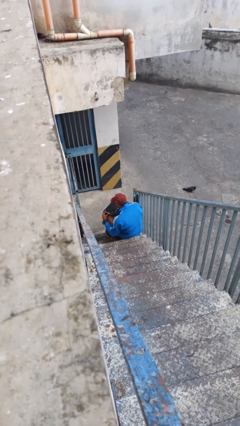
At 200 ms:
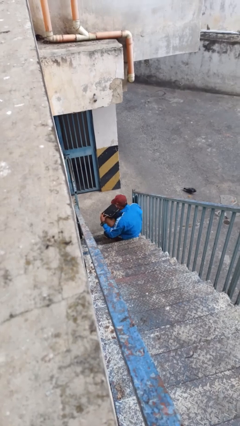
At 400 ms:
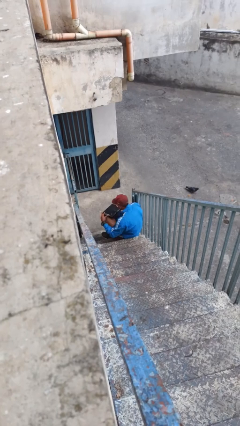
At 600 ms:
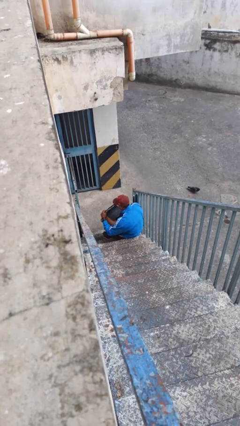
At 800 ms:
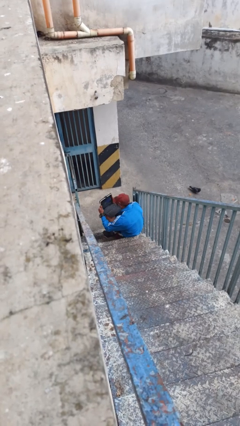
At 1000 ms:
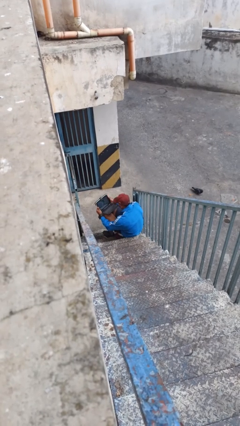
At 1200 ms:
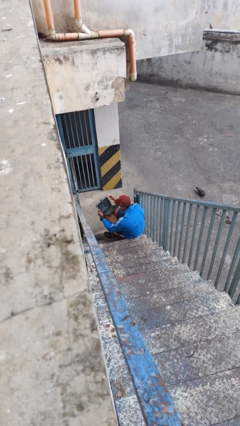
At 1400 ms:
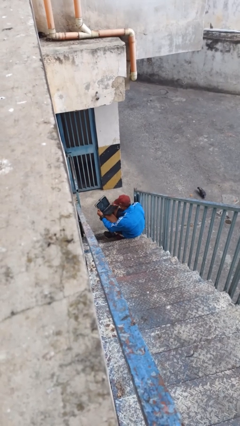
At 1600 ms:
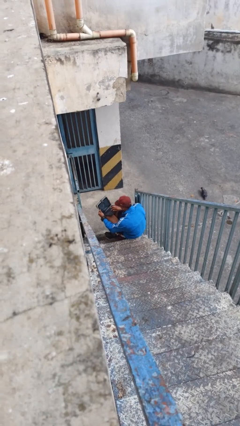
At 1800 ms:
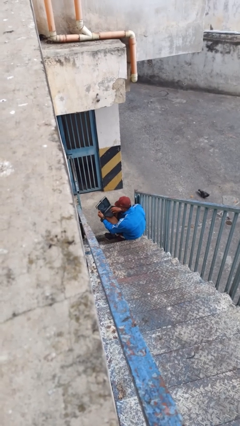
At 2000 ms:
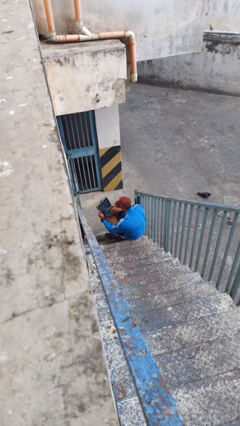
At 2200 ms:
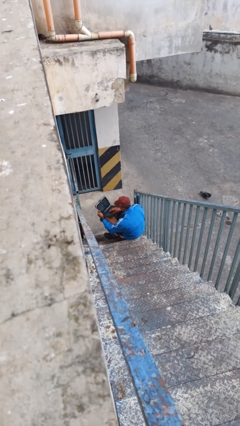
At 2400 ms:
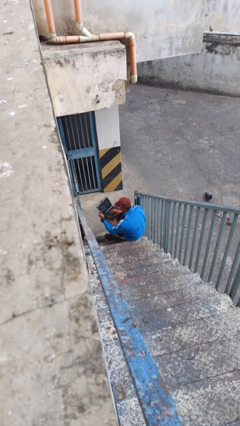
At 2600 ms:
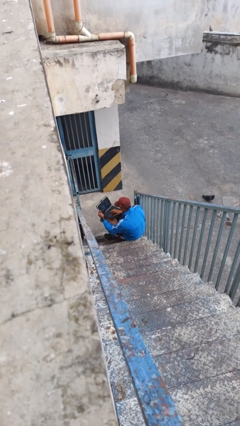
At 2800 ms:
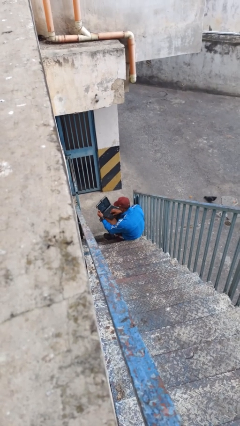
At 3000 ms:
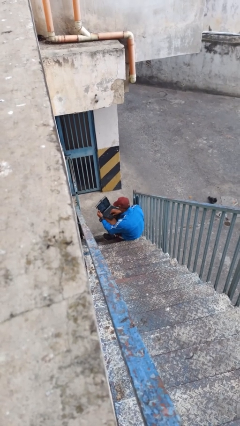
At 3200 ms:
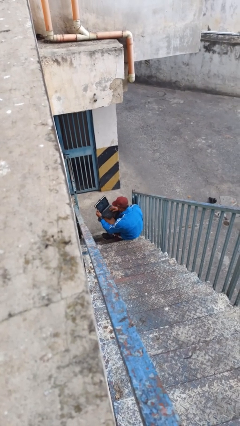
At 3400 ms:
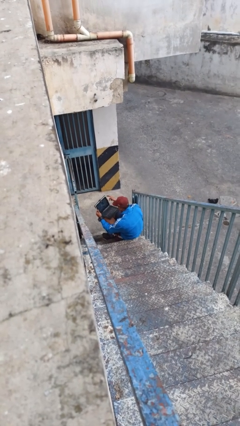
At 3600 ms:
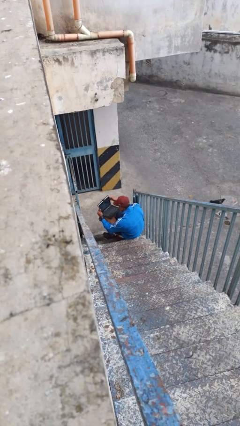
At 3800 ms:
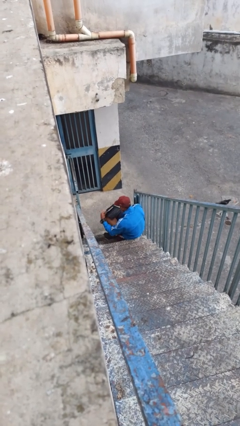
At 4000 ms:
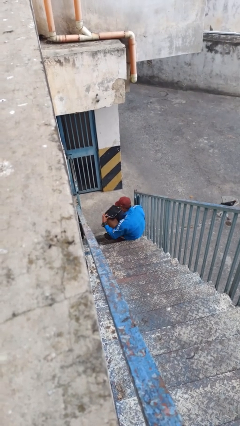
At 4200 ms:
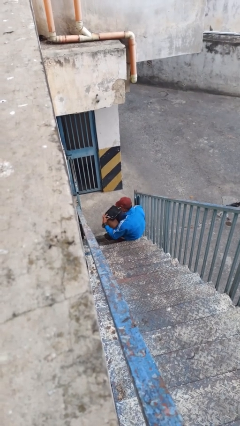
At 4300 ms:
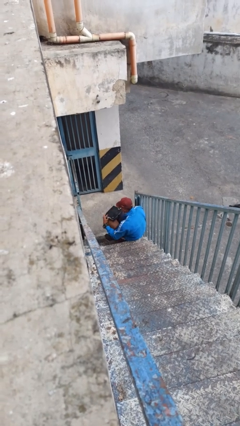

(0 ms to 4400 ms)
person interacts with laptop

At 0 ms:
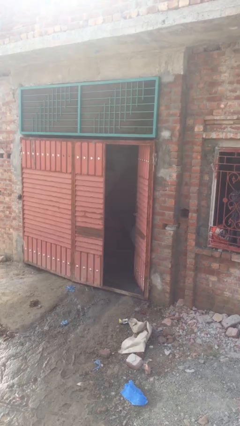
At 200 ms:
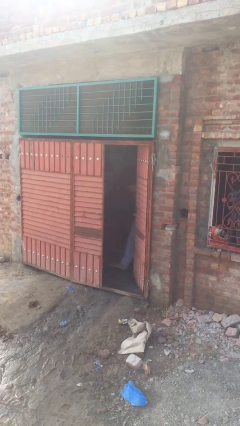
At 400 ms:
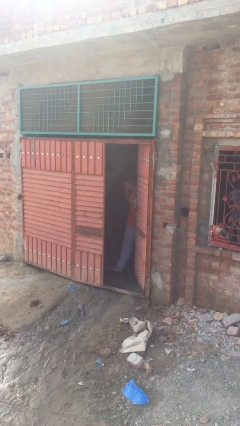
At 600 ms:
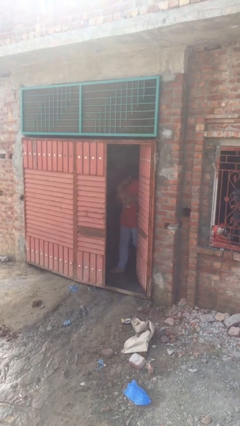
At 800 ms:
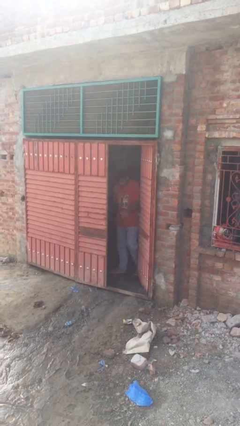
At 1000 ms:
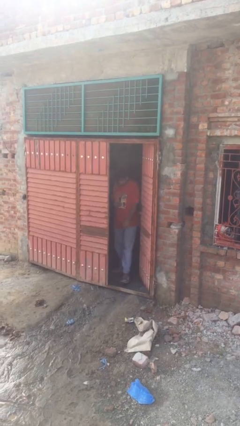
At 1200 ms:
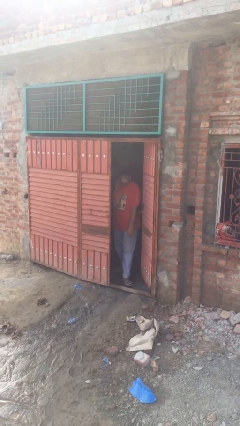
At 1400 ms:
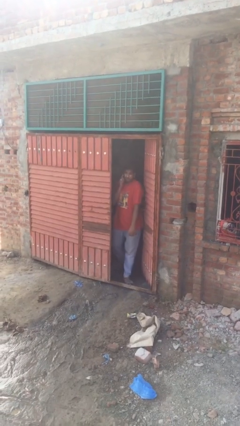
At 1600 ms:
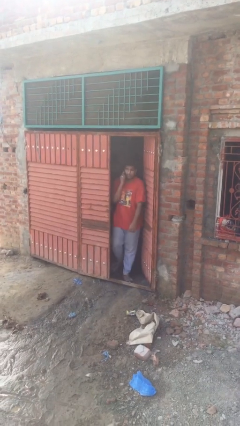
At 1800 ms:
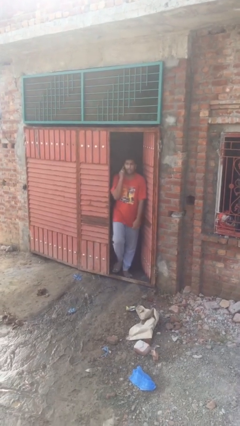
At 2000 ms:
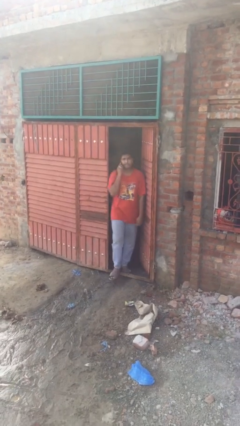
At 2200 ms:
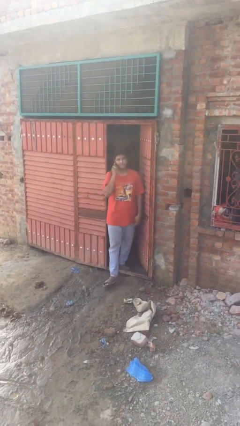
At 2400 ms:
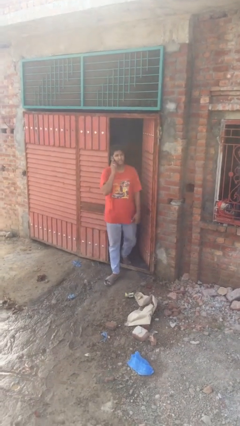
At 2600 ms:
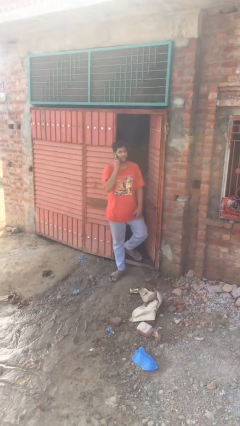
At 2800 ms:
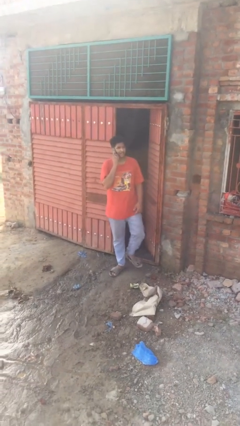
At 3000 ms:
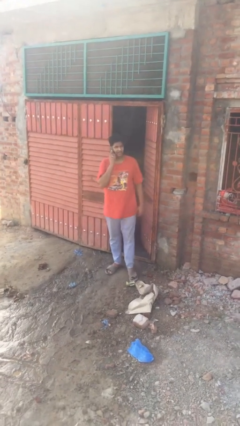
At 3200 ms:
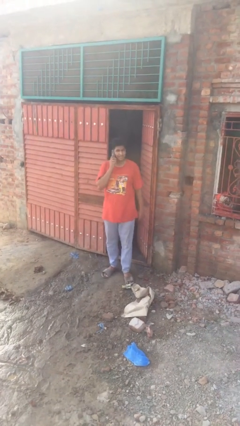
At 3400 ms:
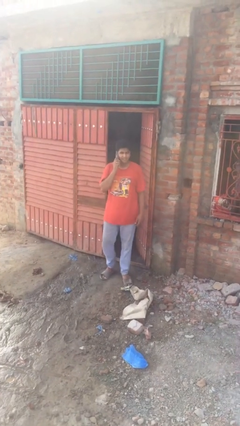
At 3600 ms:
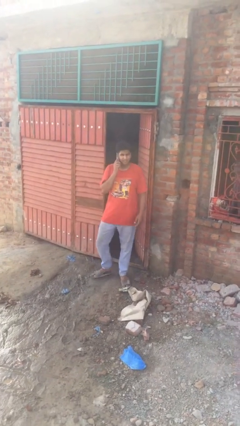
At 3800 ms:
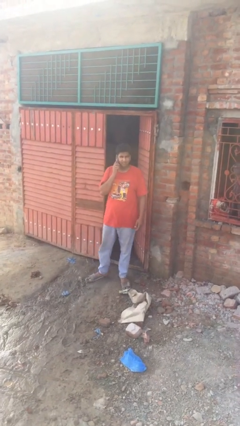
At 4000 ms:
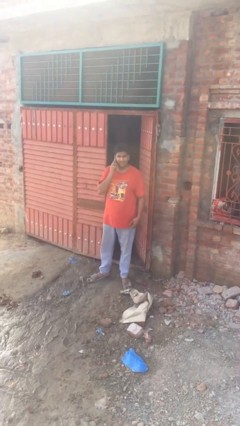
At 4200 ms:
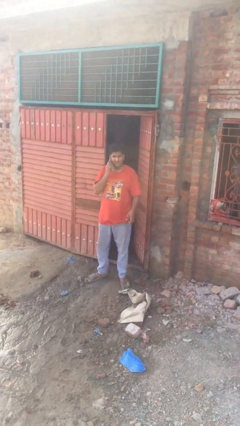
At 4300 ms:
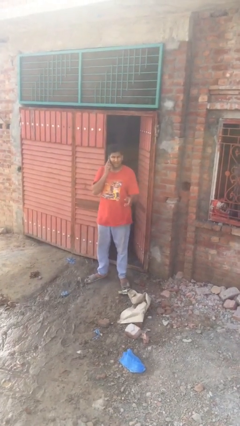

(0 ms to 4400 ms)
person enters scene through structure

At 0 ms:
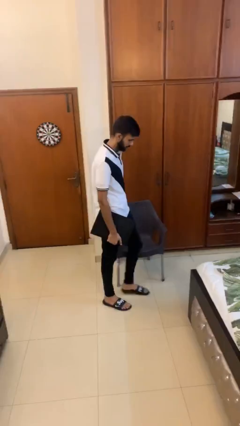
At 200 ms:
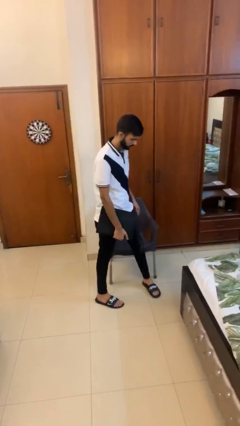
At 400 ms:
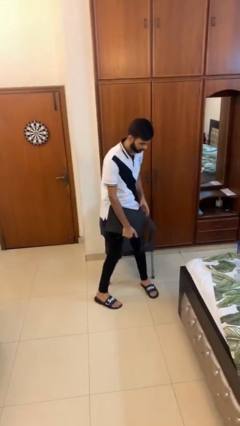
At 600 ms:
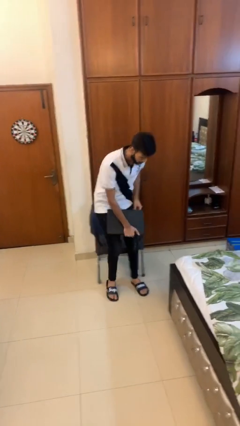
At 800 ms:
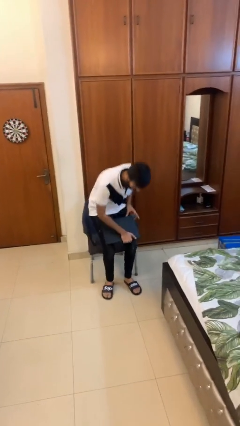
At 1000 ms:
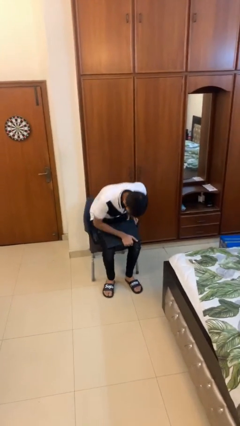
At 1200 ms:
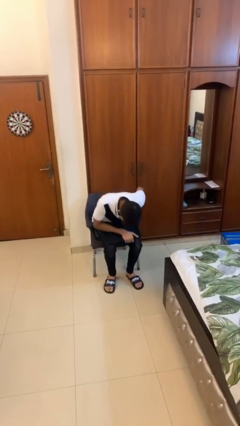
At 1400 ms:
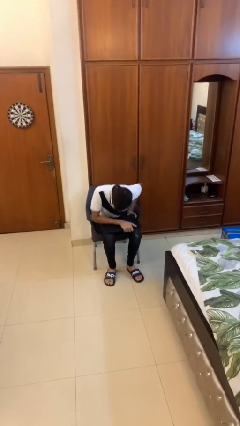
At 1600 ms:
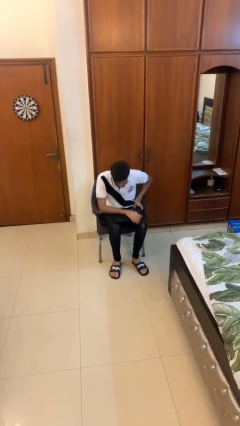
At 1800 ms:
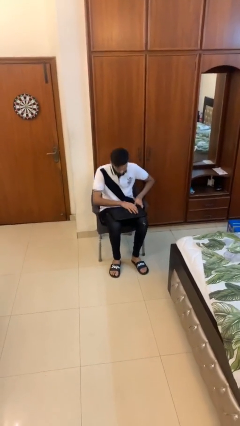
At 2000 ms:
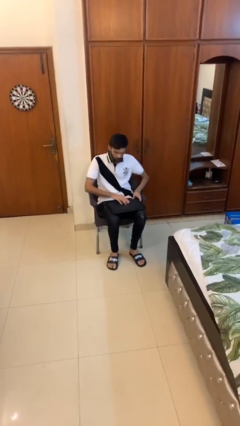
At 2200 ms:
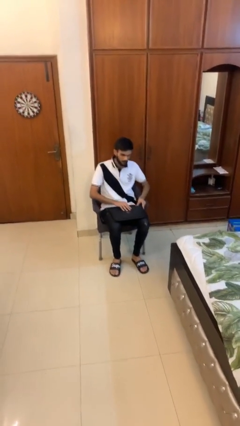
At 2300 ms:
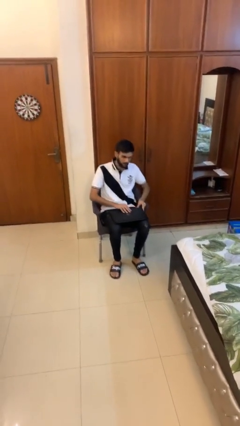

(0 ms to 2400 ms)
person sits down

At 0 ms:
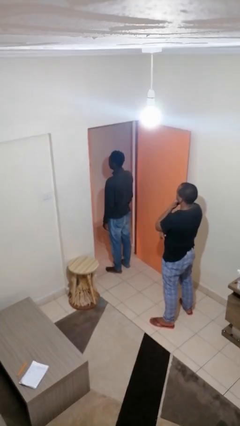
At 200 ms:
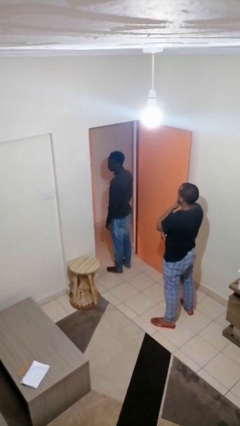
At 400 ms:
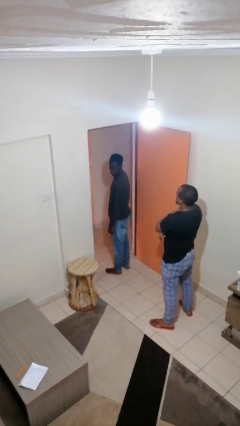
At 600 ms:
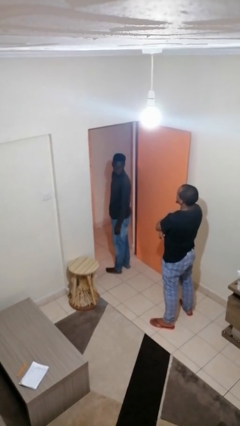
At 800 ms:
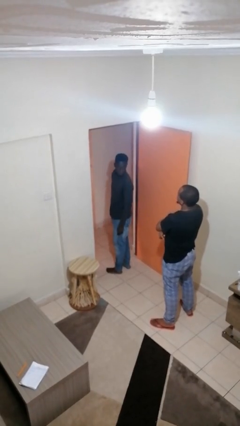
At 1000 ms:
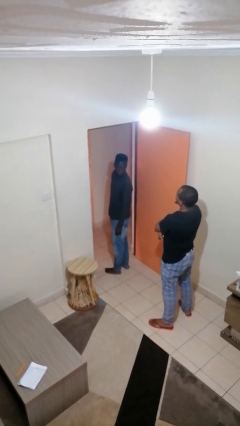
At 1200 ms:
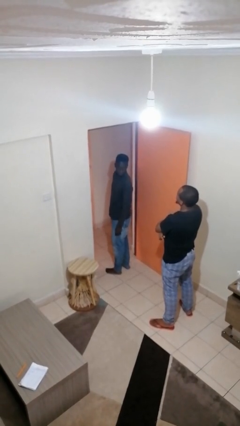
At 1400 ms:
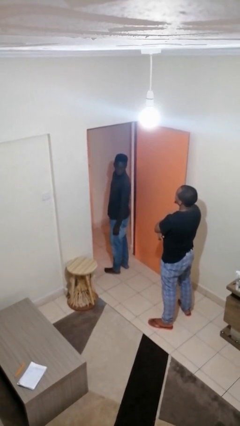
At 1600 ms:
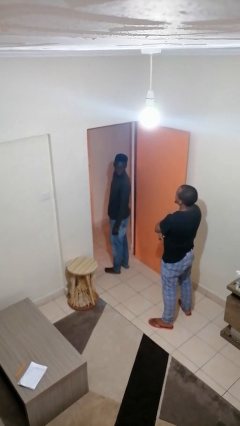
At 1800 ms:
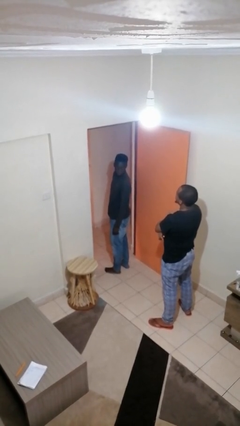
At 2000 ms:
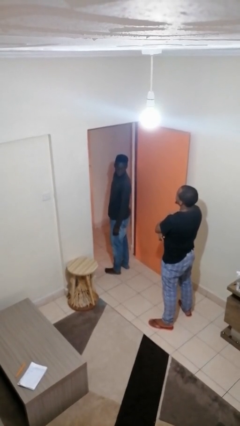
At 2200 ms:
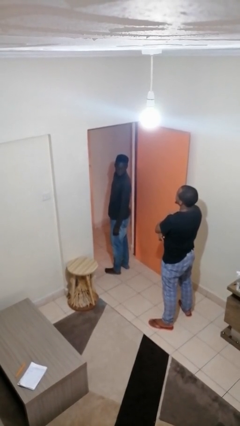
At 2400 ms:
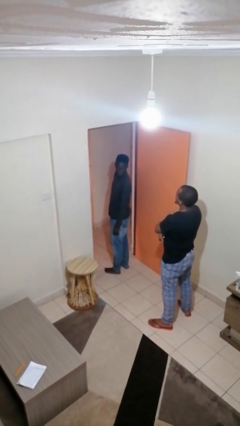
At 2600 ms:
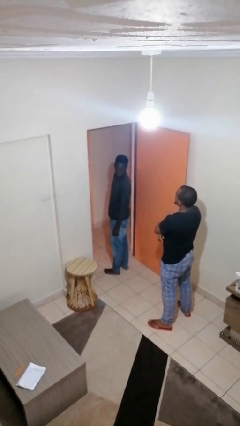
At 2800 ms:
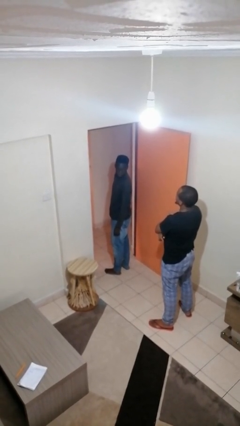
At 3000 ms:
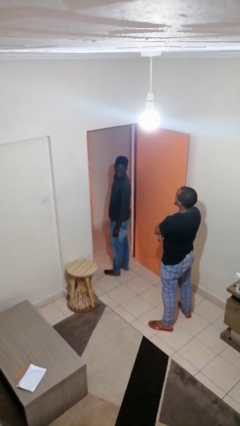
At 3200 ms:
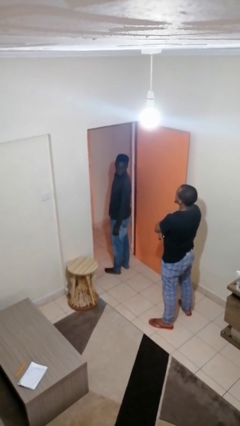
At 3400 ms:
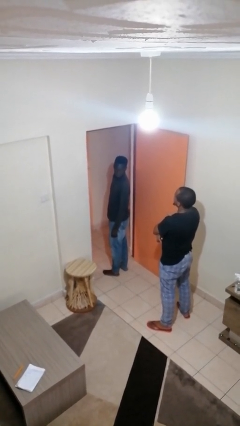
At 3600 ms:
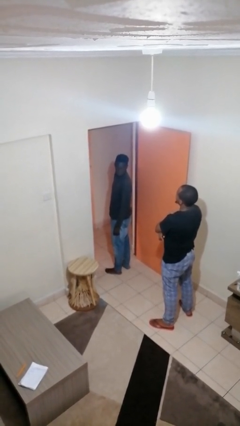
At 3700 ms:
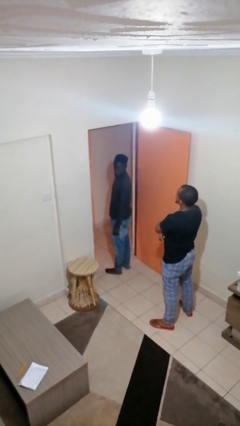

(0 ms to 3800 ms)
person looks over shoulder

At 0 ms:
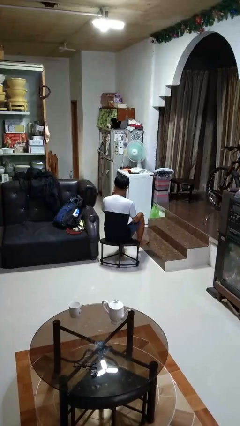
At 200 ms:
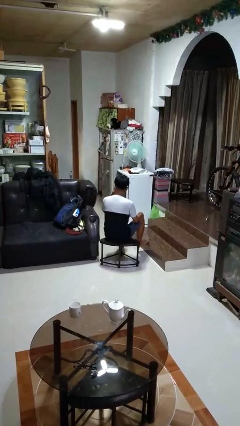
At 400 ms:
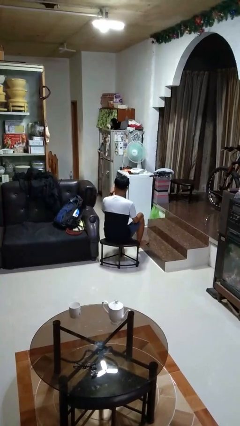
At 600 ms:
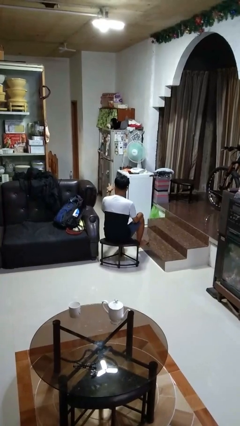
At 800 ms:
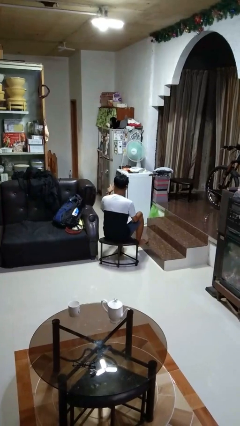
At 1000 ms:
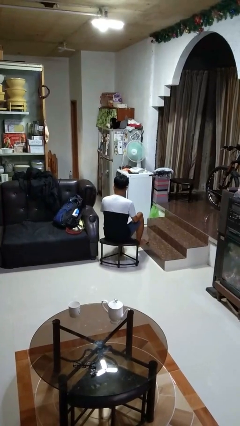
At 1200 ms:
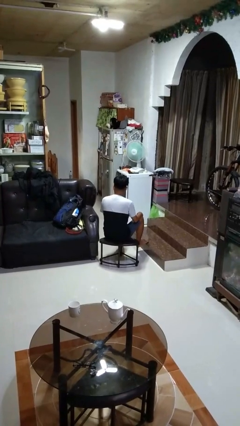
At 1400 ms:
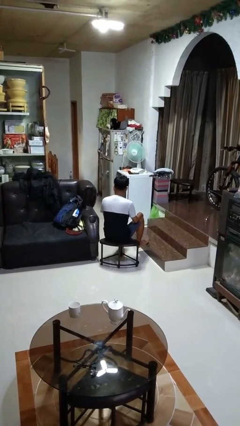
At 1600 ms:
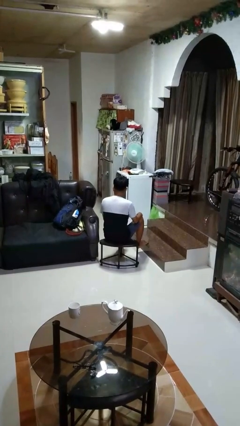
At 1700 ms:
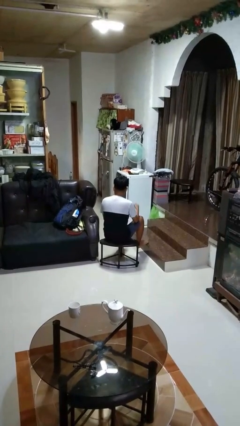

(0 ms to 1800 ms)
person gestures watch closely

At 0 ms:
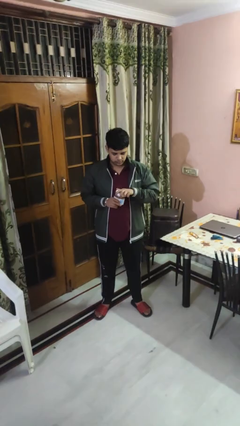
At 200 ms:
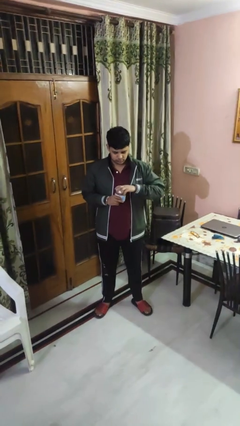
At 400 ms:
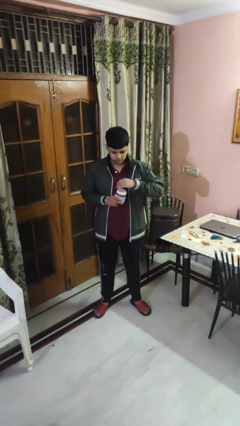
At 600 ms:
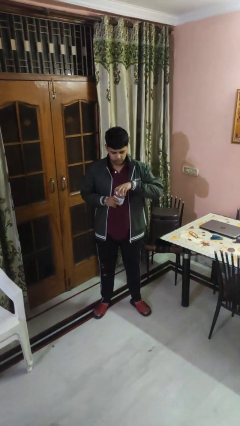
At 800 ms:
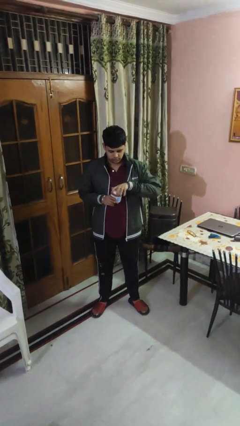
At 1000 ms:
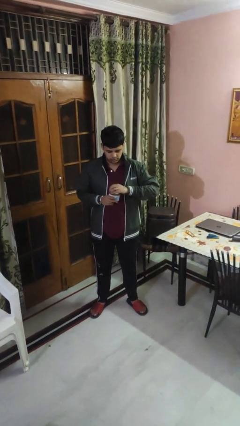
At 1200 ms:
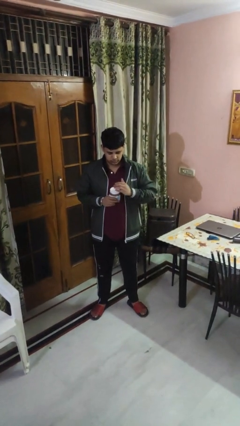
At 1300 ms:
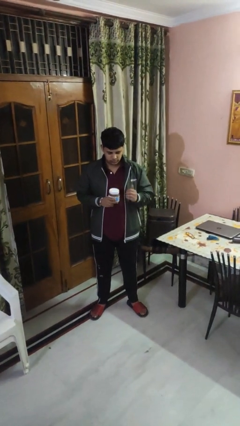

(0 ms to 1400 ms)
person closes jar
